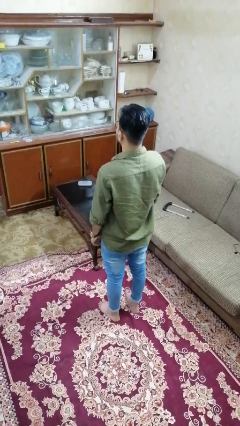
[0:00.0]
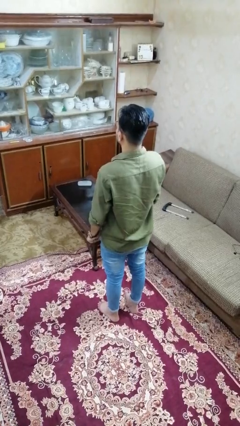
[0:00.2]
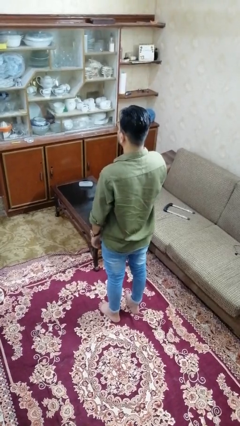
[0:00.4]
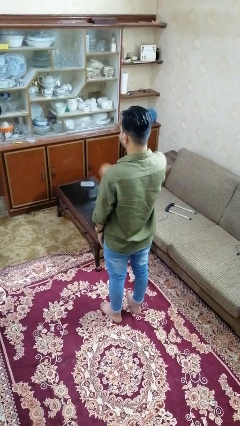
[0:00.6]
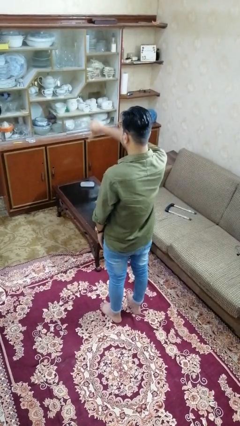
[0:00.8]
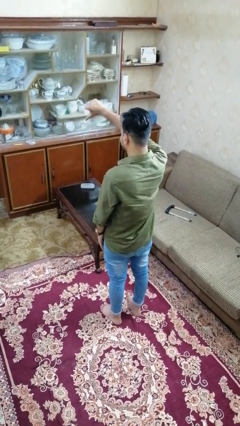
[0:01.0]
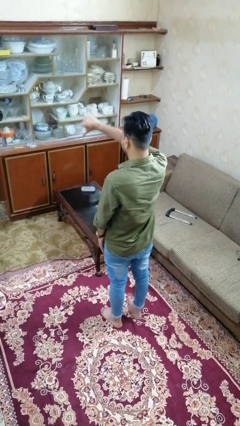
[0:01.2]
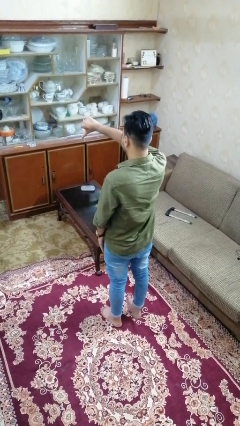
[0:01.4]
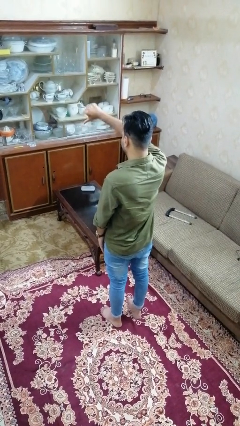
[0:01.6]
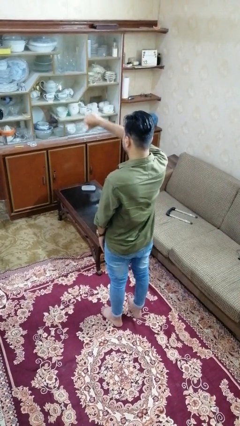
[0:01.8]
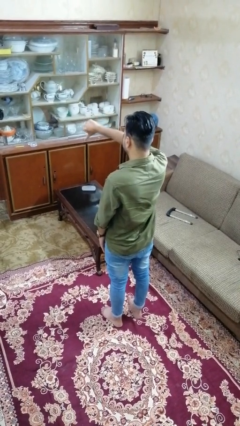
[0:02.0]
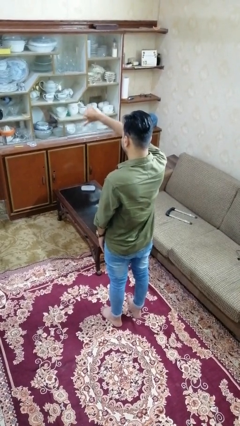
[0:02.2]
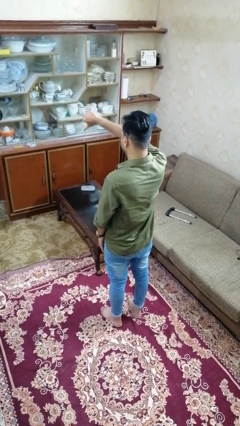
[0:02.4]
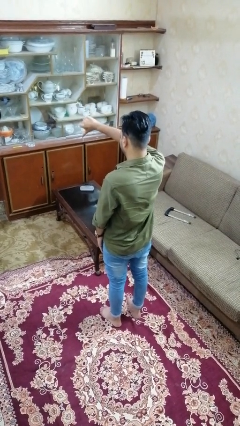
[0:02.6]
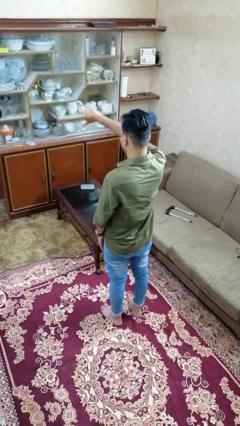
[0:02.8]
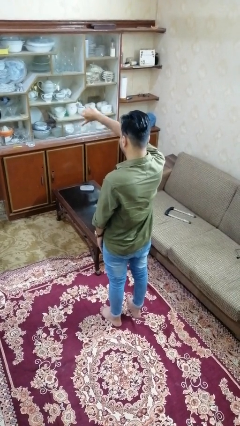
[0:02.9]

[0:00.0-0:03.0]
person gestures thumbs down

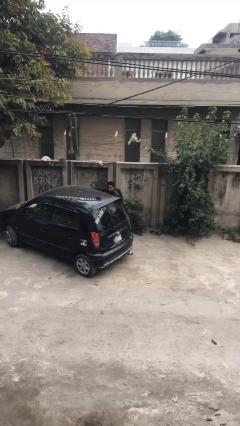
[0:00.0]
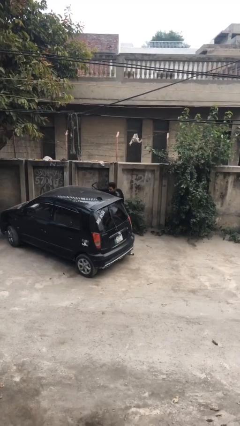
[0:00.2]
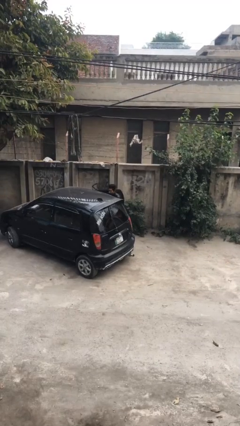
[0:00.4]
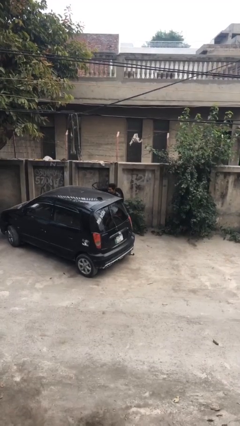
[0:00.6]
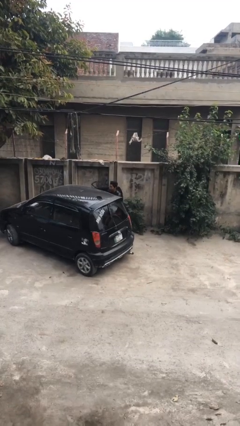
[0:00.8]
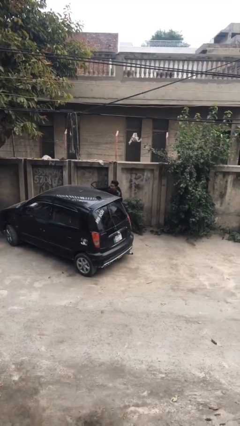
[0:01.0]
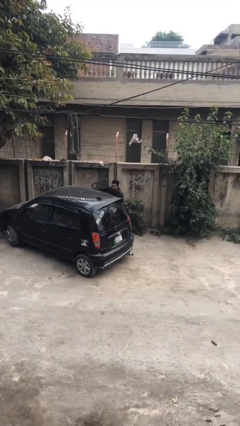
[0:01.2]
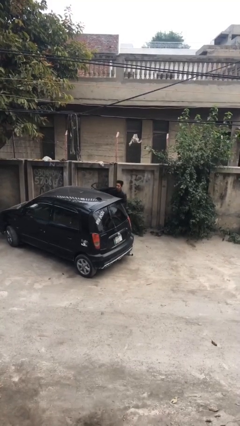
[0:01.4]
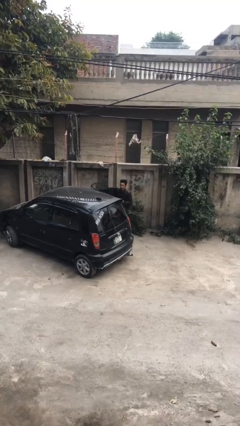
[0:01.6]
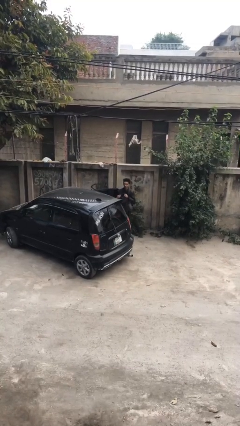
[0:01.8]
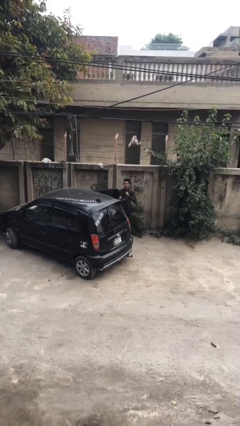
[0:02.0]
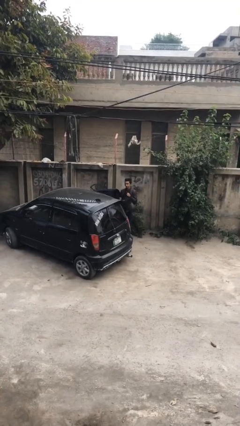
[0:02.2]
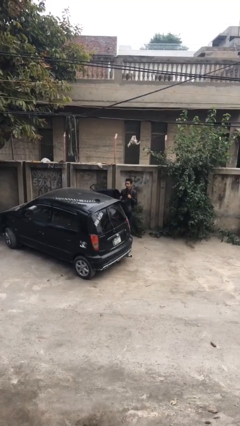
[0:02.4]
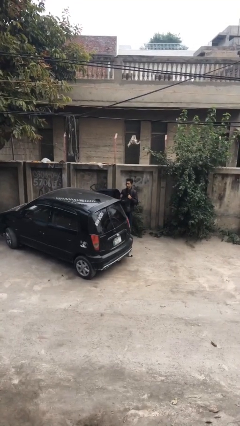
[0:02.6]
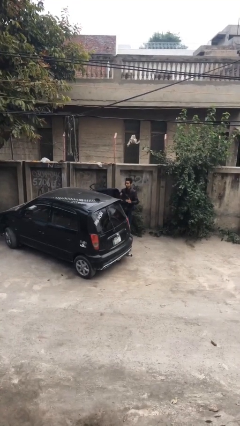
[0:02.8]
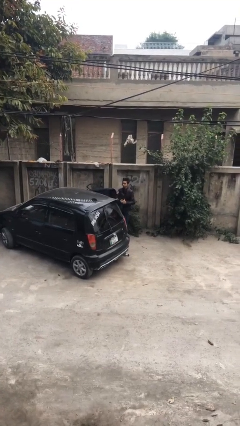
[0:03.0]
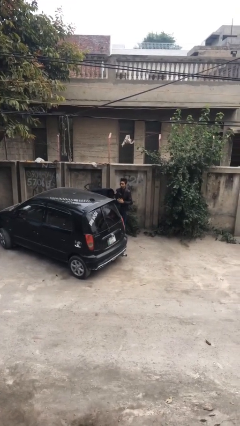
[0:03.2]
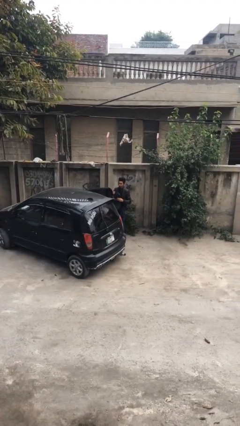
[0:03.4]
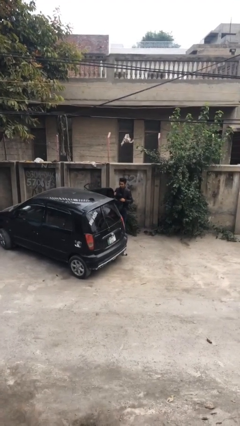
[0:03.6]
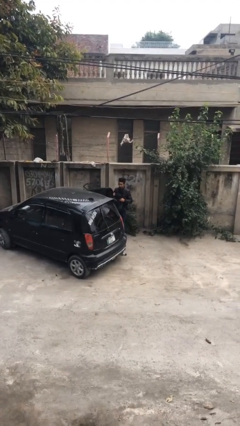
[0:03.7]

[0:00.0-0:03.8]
person unloads car

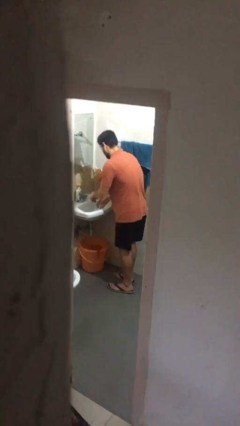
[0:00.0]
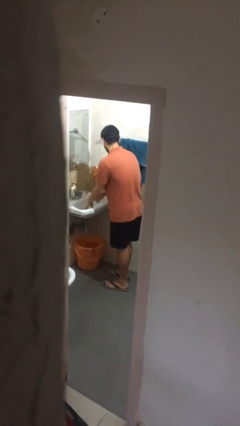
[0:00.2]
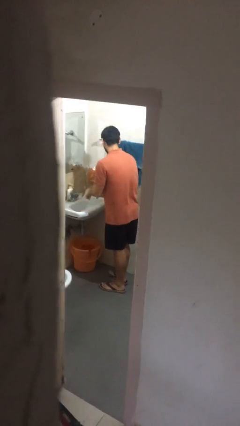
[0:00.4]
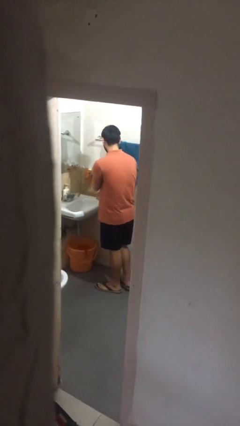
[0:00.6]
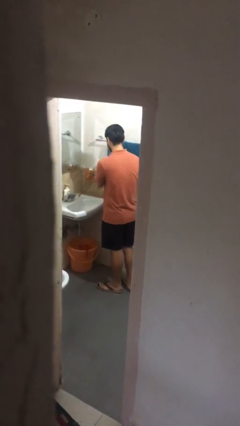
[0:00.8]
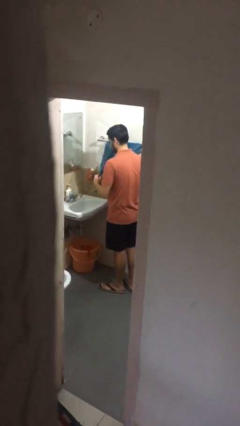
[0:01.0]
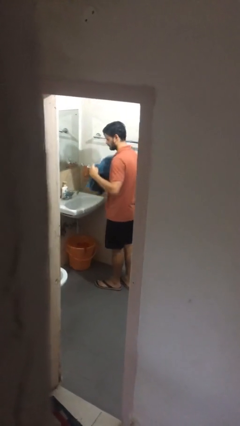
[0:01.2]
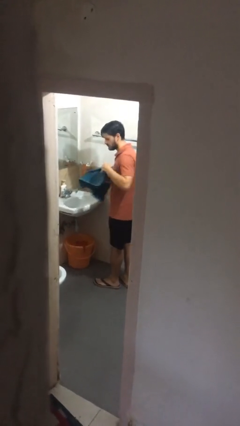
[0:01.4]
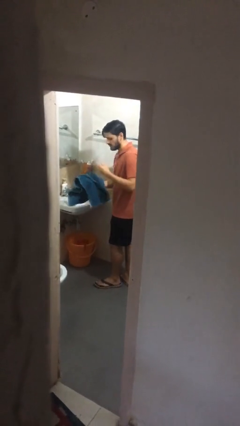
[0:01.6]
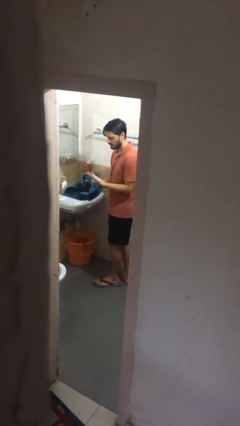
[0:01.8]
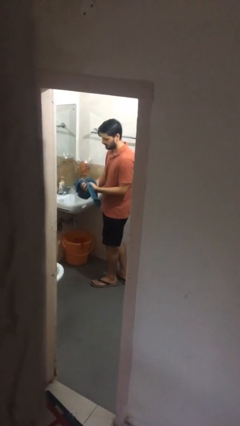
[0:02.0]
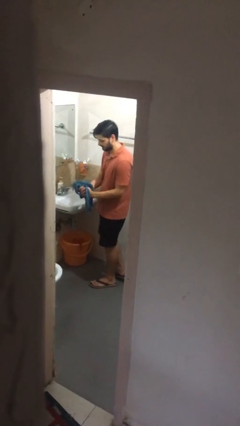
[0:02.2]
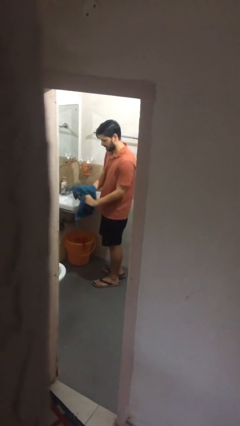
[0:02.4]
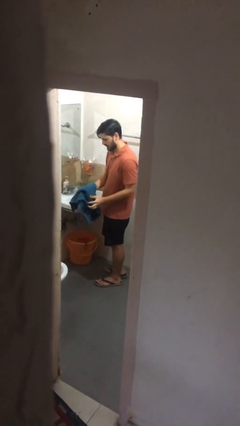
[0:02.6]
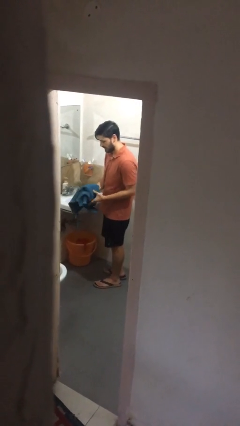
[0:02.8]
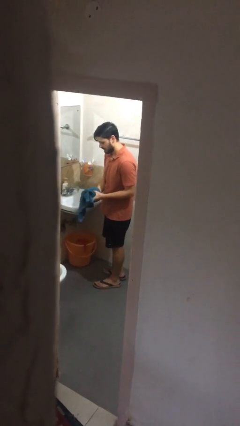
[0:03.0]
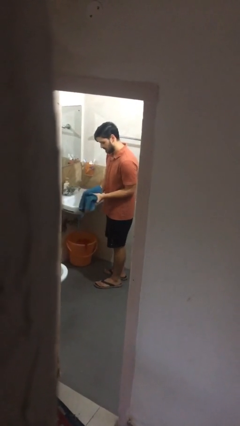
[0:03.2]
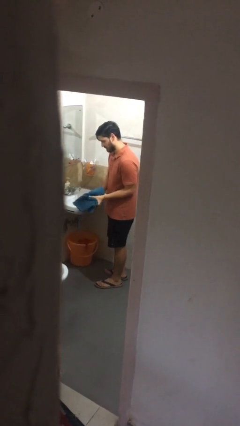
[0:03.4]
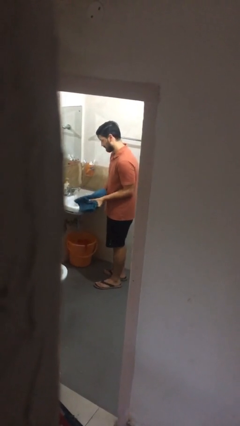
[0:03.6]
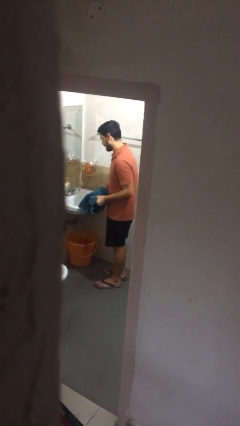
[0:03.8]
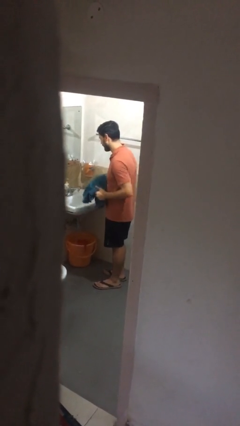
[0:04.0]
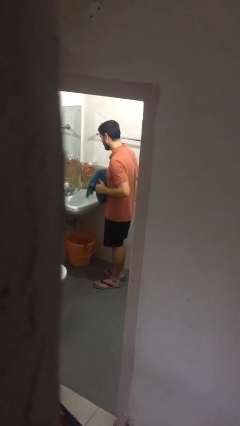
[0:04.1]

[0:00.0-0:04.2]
person dries hands with towel

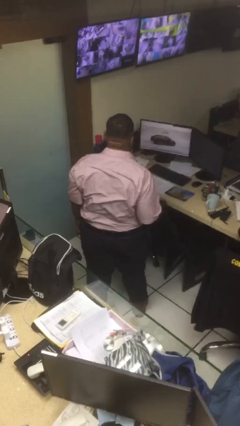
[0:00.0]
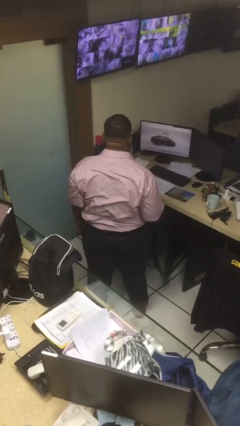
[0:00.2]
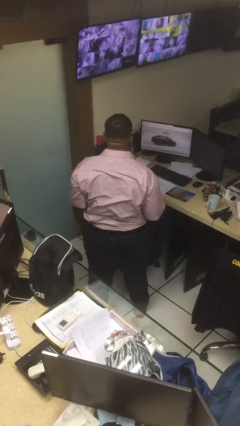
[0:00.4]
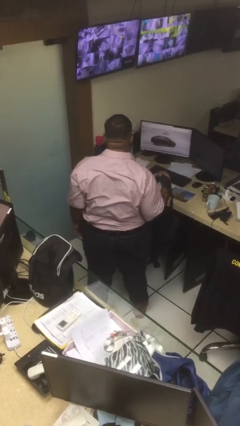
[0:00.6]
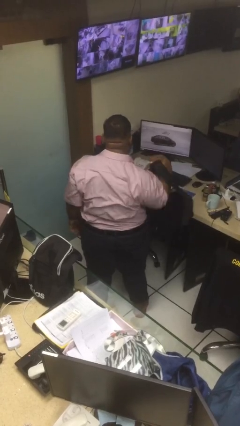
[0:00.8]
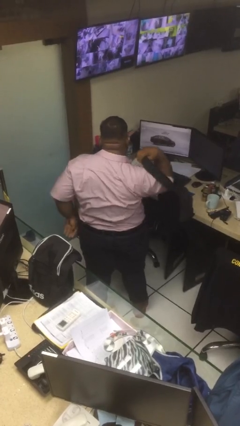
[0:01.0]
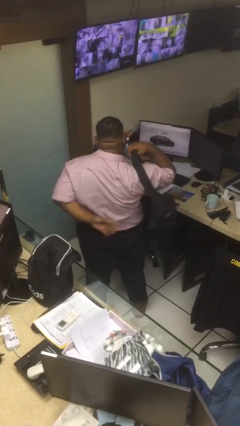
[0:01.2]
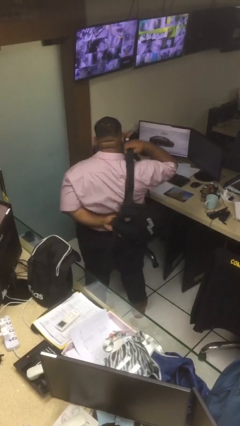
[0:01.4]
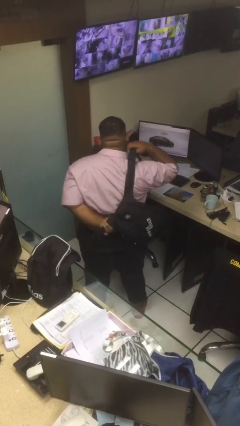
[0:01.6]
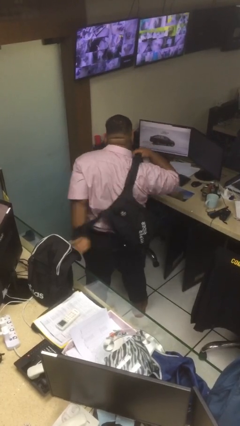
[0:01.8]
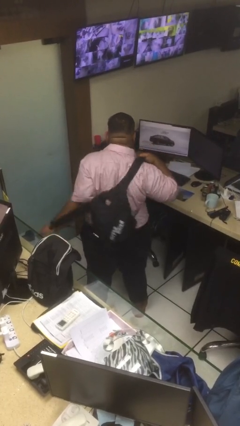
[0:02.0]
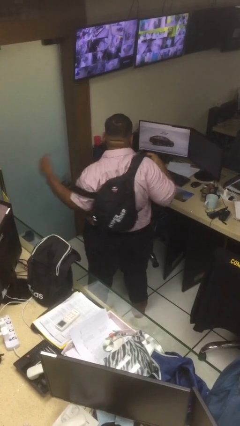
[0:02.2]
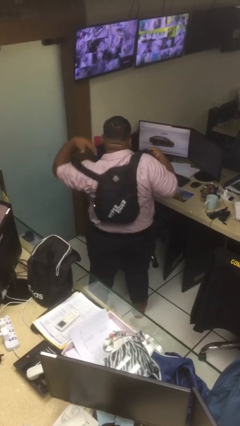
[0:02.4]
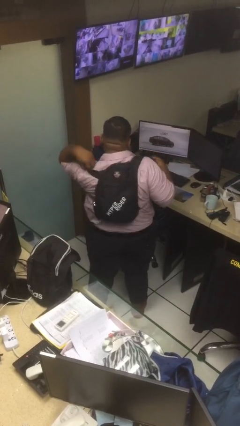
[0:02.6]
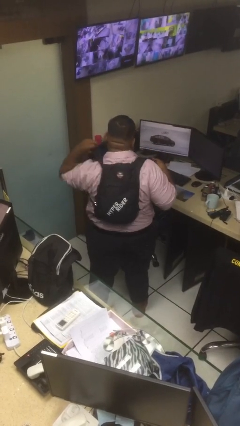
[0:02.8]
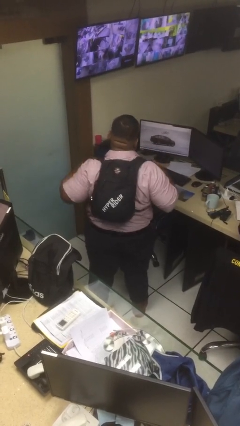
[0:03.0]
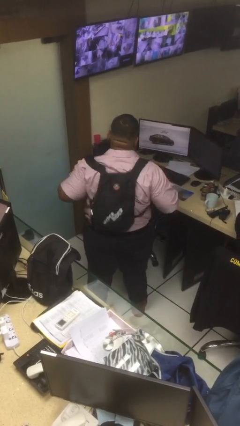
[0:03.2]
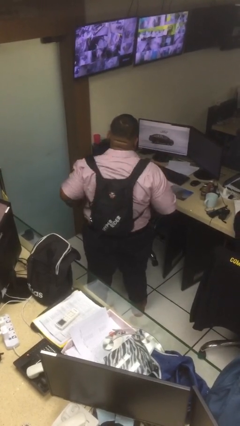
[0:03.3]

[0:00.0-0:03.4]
person puts on backpack

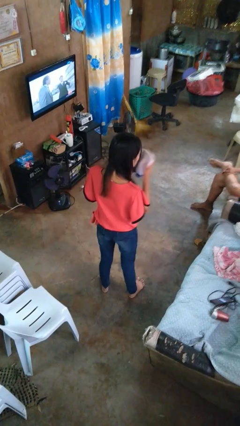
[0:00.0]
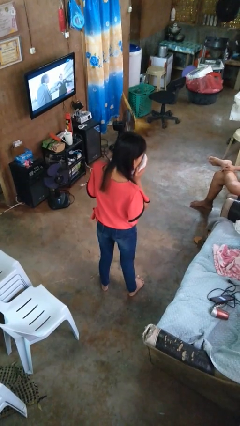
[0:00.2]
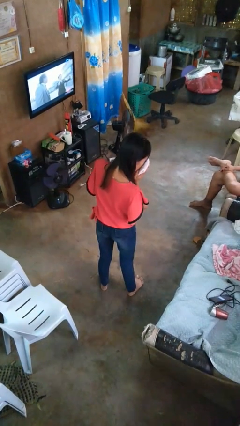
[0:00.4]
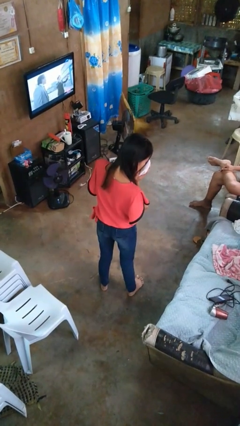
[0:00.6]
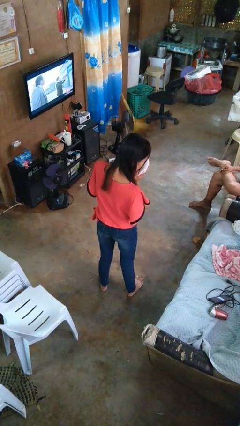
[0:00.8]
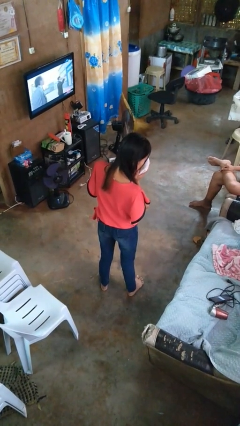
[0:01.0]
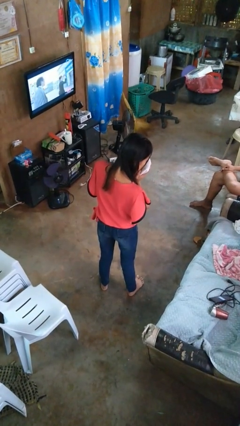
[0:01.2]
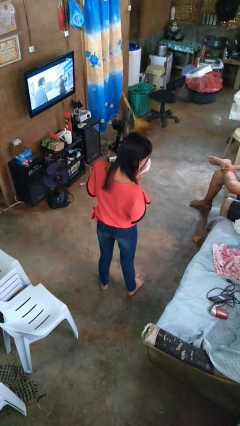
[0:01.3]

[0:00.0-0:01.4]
person blows nose

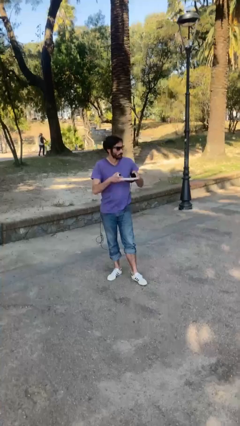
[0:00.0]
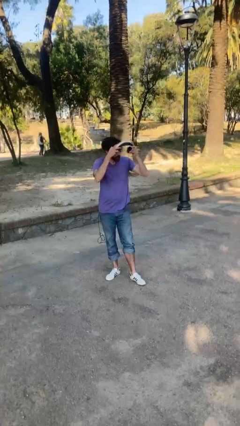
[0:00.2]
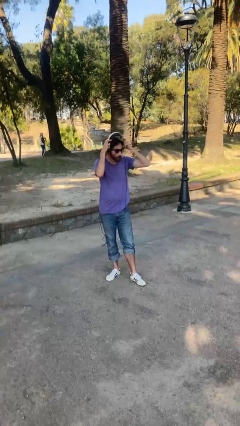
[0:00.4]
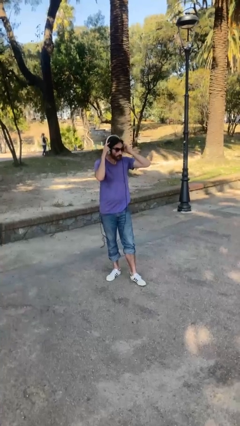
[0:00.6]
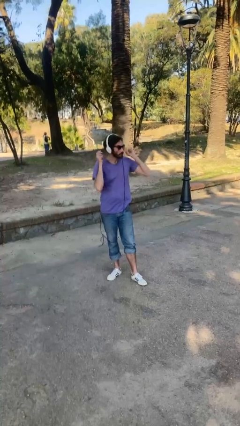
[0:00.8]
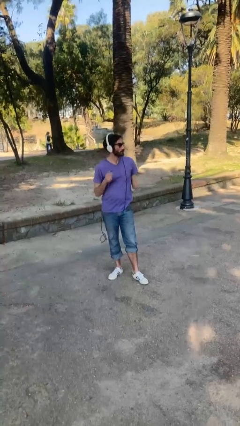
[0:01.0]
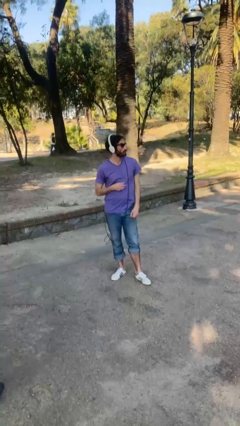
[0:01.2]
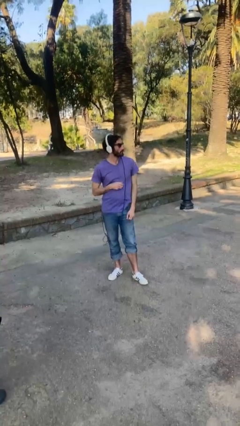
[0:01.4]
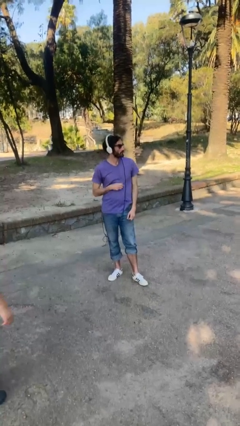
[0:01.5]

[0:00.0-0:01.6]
person puts on headphones

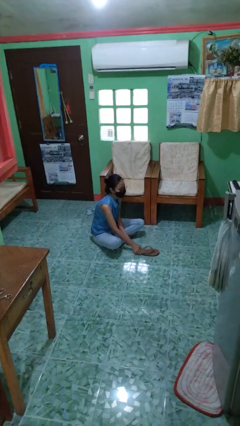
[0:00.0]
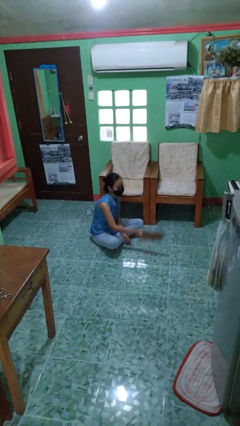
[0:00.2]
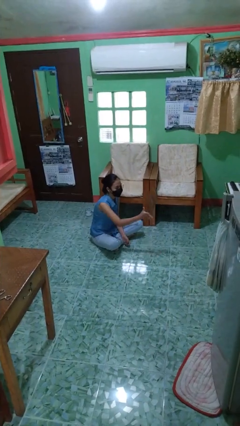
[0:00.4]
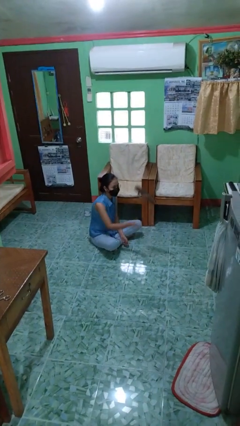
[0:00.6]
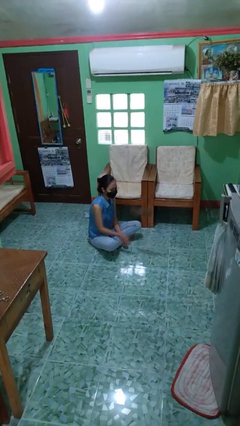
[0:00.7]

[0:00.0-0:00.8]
person throws object into air
